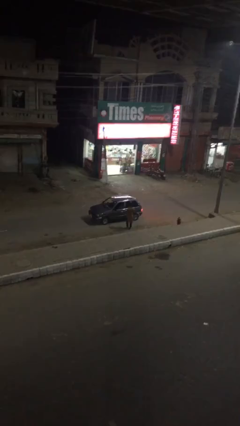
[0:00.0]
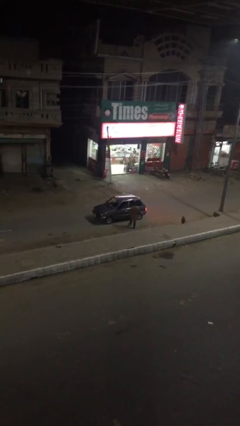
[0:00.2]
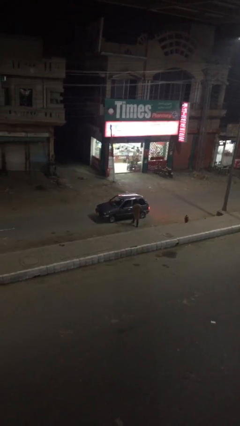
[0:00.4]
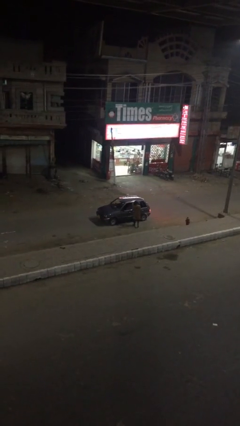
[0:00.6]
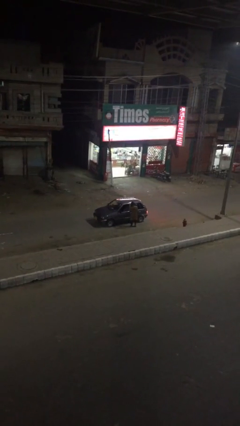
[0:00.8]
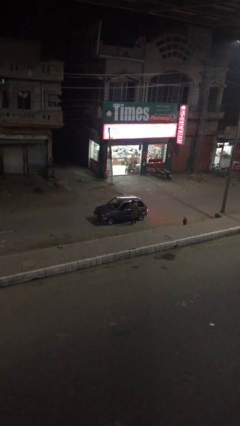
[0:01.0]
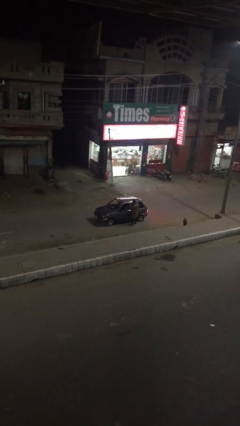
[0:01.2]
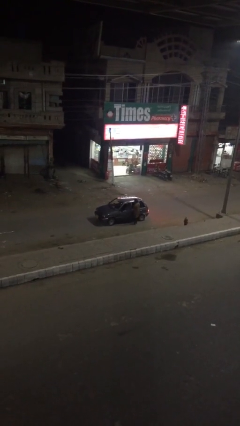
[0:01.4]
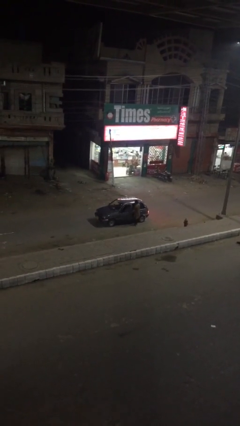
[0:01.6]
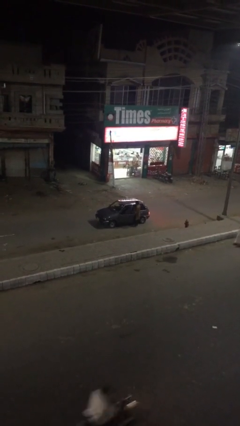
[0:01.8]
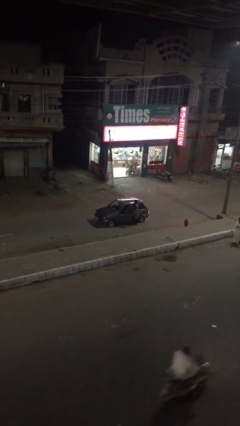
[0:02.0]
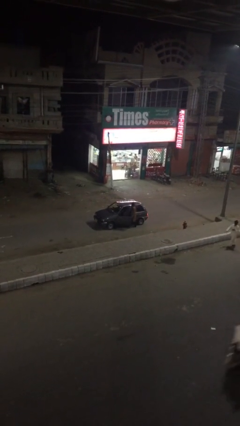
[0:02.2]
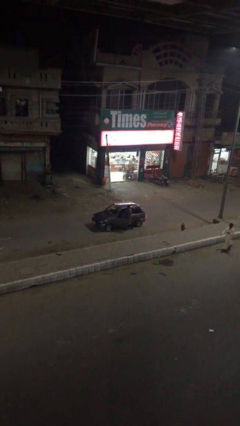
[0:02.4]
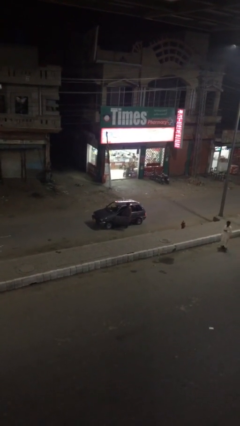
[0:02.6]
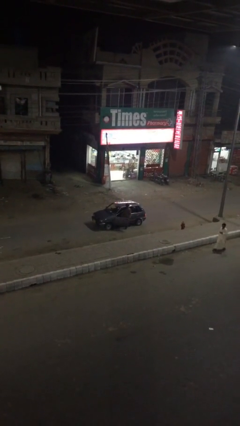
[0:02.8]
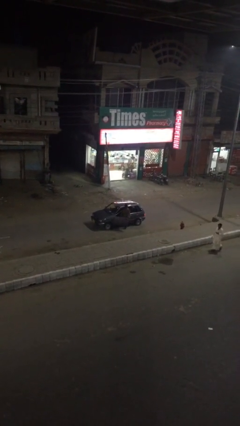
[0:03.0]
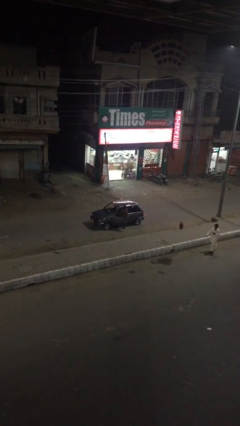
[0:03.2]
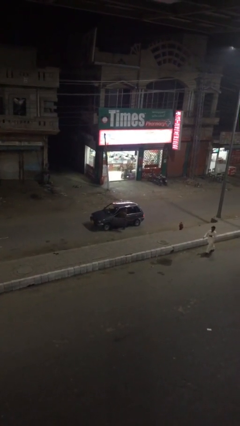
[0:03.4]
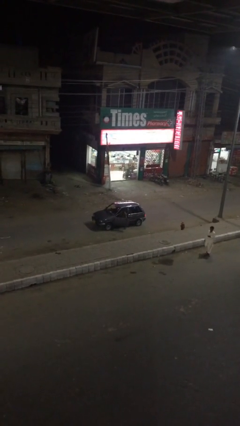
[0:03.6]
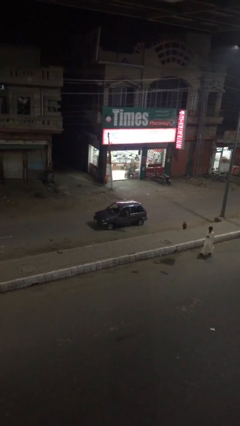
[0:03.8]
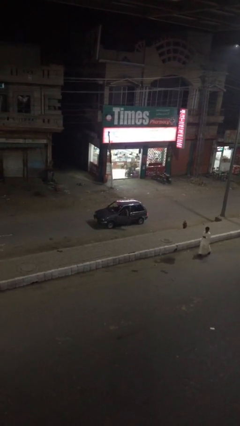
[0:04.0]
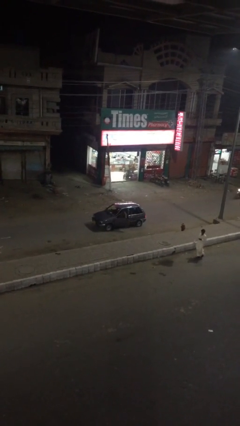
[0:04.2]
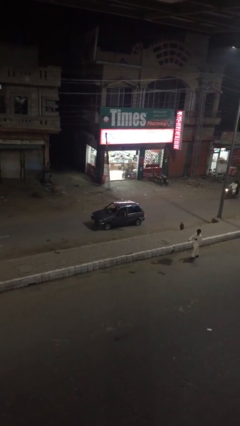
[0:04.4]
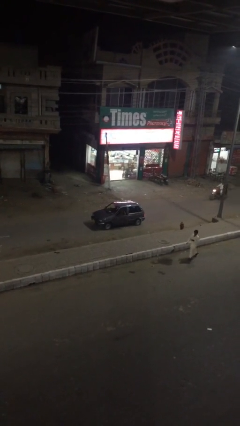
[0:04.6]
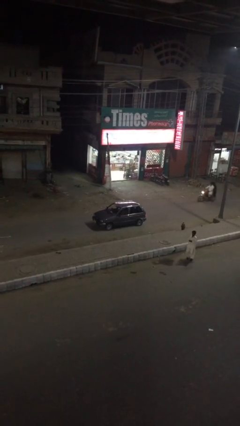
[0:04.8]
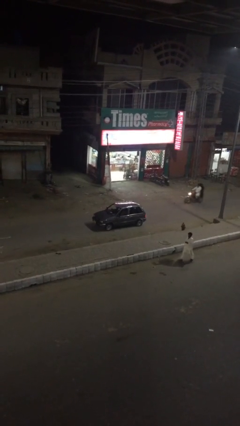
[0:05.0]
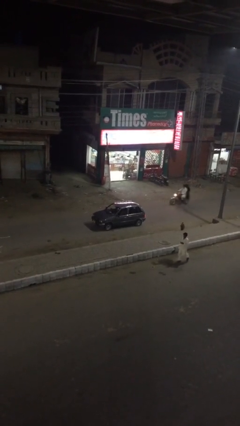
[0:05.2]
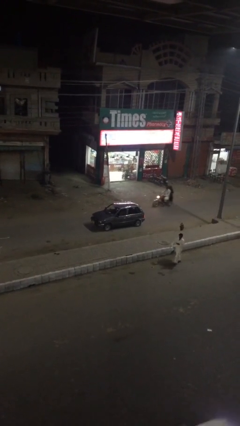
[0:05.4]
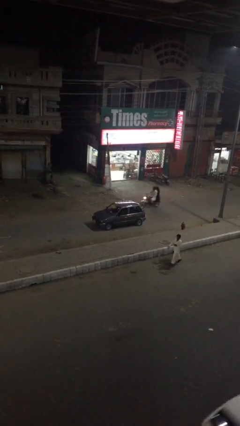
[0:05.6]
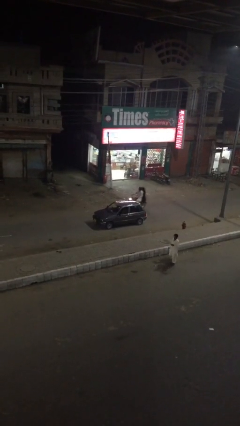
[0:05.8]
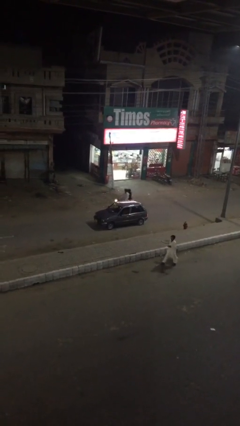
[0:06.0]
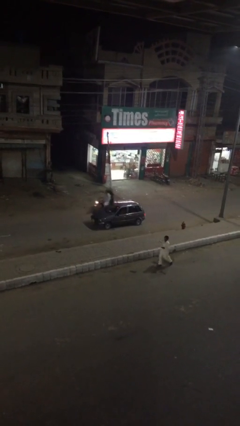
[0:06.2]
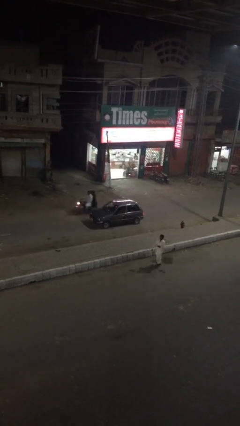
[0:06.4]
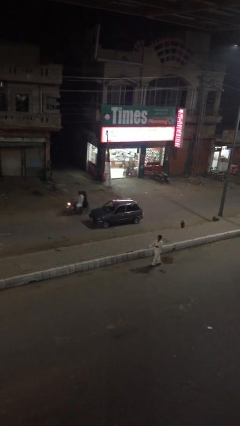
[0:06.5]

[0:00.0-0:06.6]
car picks up person

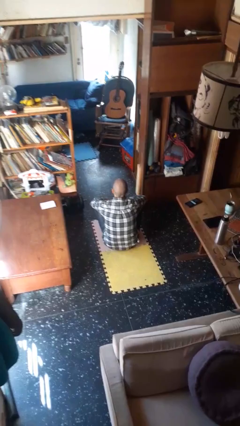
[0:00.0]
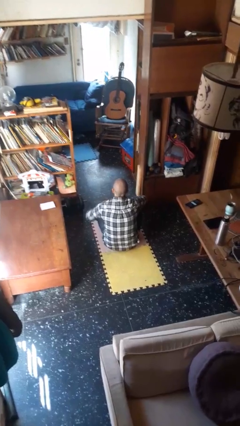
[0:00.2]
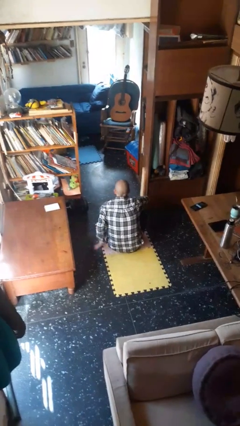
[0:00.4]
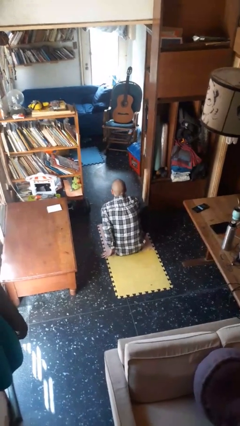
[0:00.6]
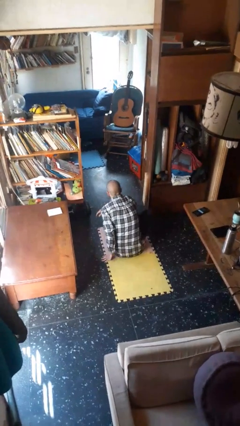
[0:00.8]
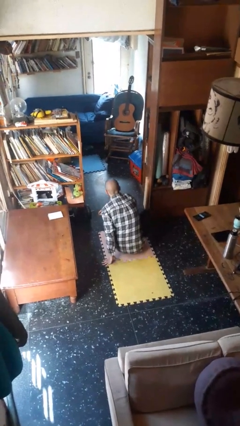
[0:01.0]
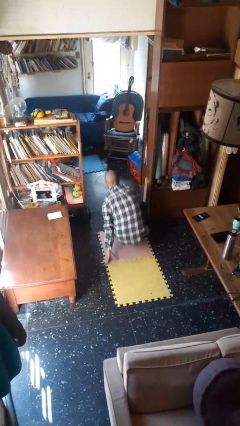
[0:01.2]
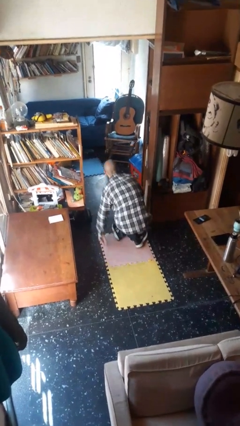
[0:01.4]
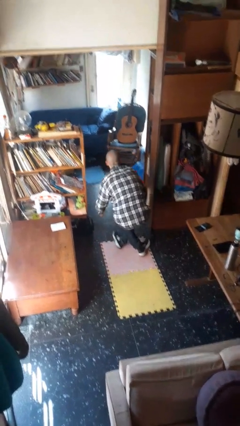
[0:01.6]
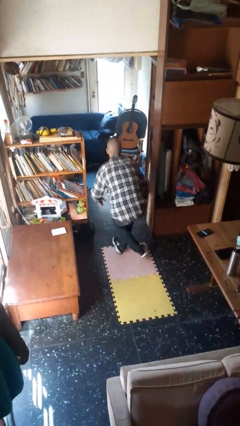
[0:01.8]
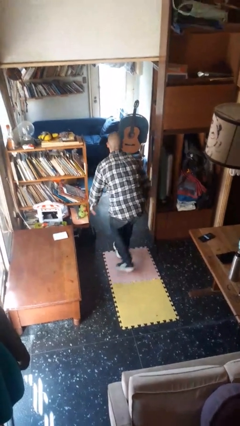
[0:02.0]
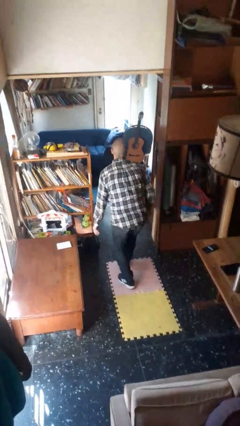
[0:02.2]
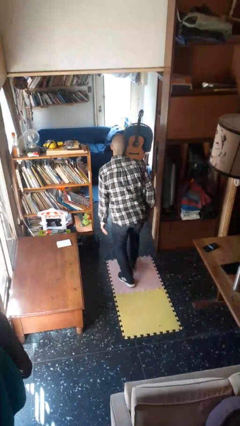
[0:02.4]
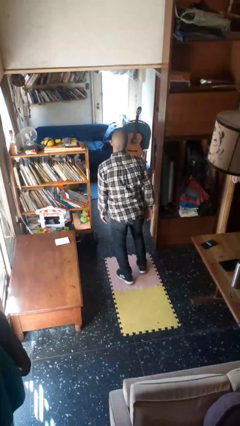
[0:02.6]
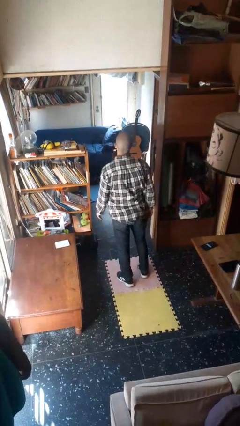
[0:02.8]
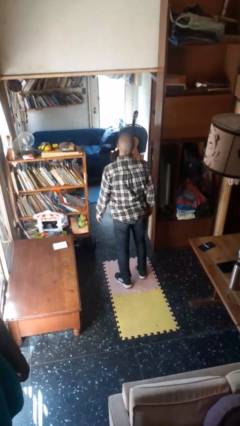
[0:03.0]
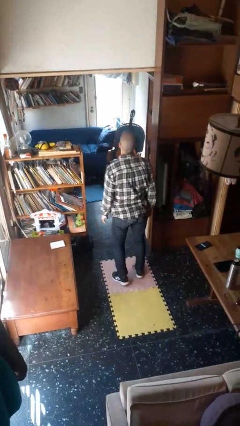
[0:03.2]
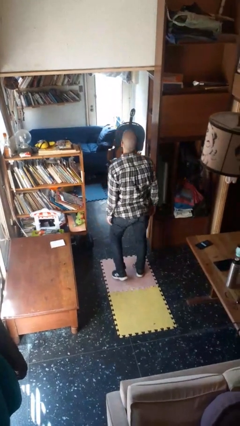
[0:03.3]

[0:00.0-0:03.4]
person stands up from floor

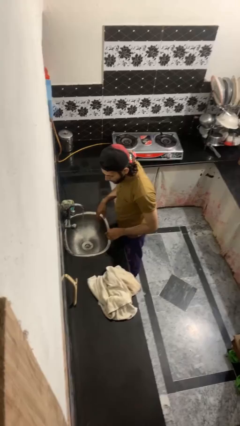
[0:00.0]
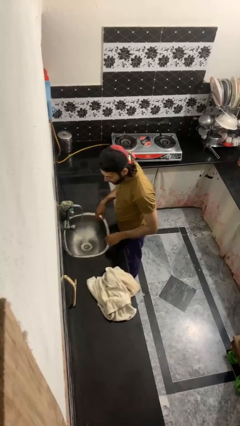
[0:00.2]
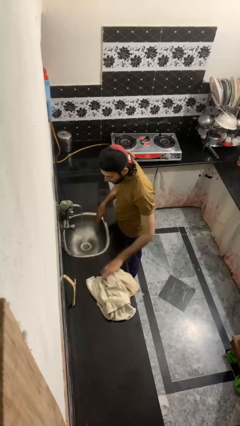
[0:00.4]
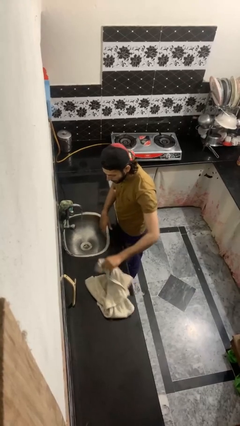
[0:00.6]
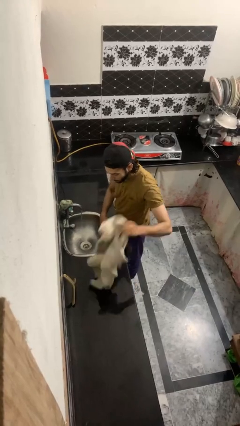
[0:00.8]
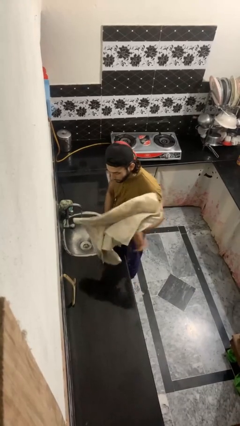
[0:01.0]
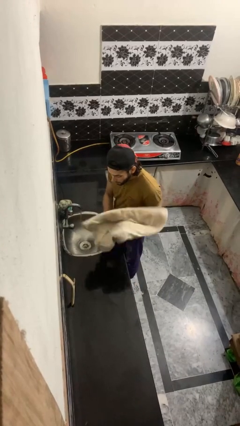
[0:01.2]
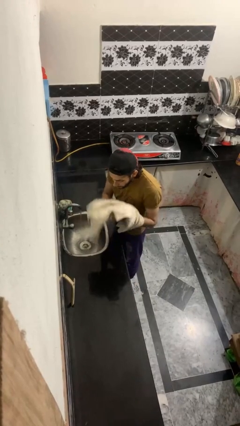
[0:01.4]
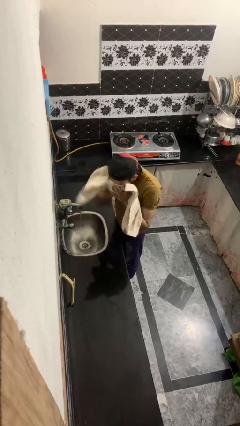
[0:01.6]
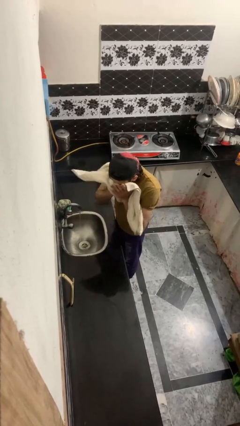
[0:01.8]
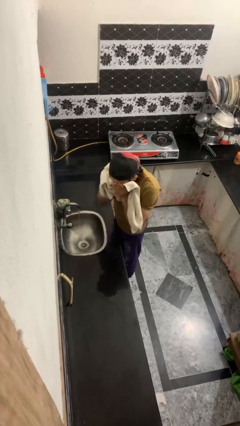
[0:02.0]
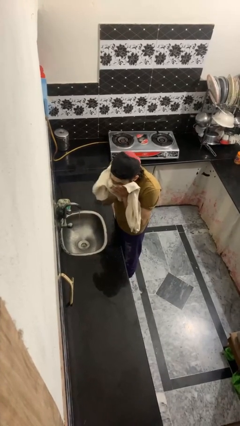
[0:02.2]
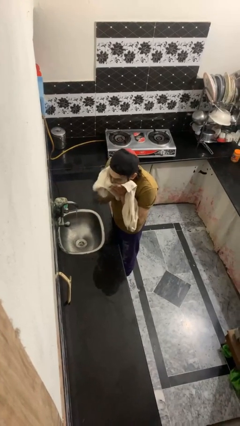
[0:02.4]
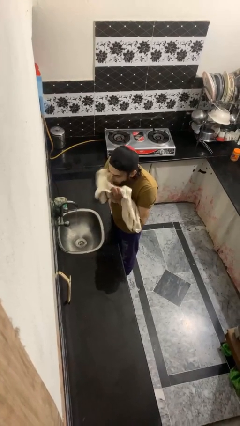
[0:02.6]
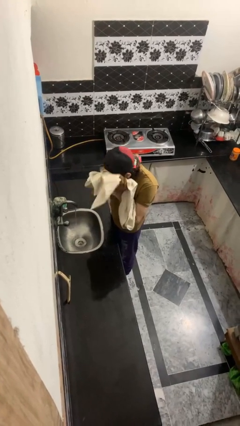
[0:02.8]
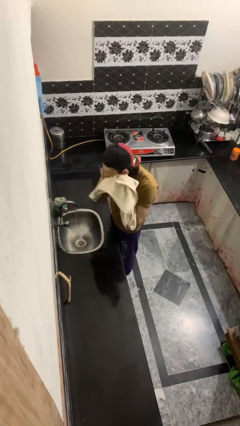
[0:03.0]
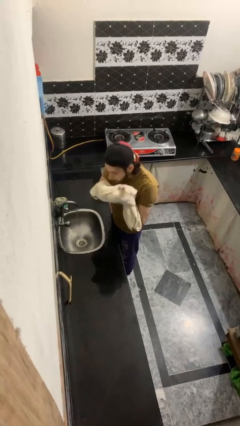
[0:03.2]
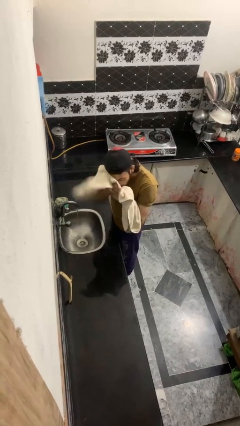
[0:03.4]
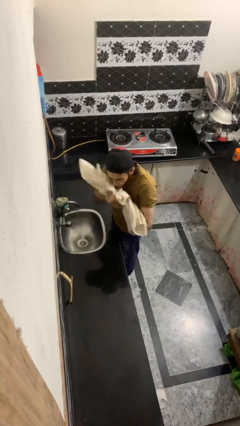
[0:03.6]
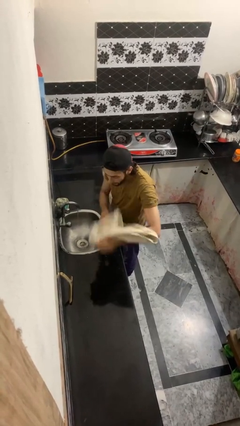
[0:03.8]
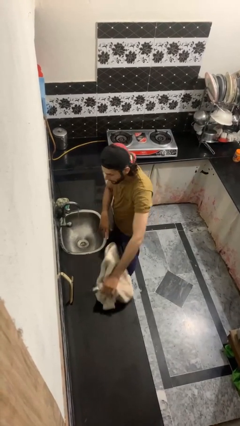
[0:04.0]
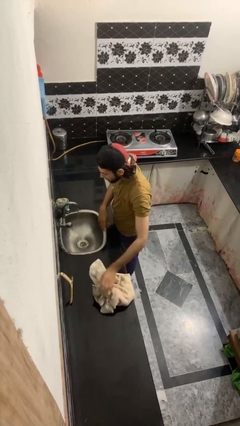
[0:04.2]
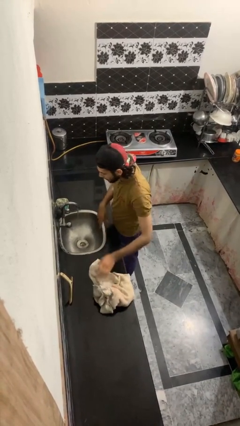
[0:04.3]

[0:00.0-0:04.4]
person dries face with towel

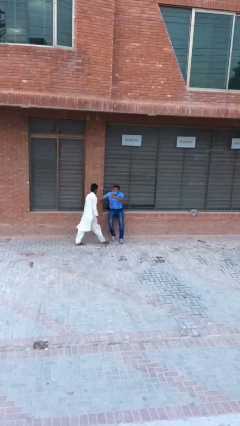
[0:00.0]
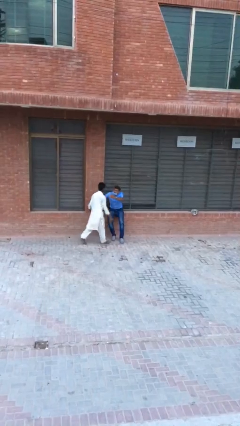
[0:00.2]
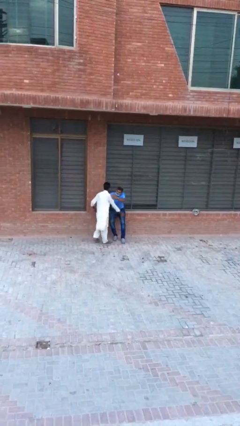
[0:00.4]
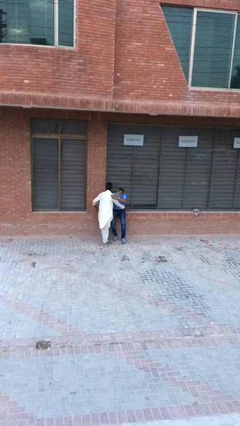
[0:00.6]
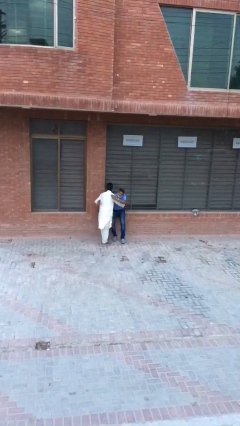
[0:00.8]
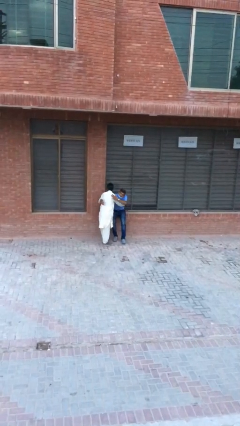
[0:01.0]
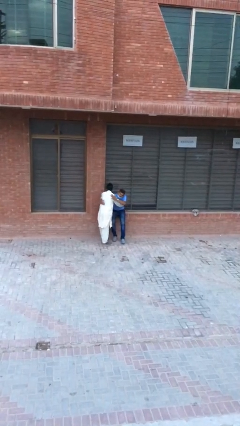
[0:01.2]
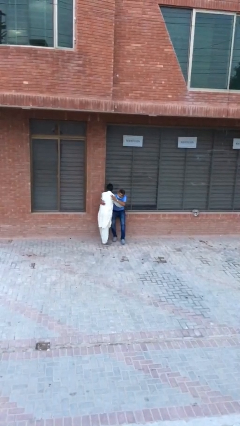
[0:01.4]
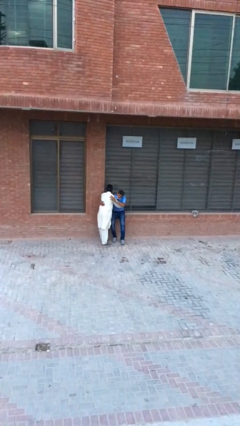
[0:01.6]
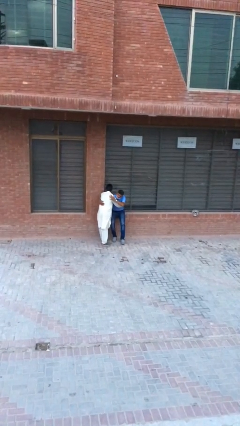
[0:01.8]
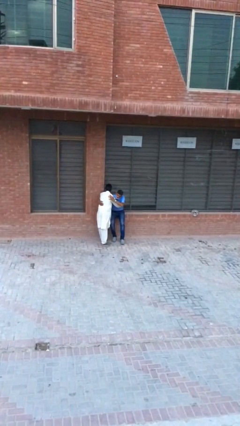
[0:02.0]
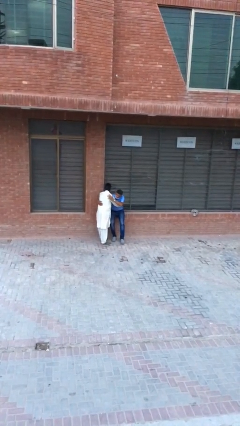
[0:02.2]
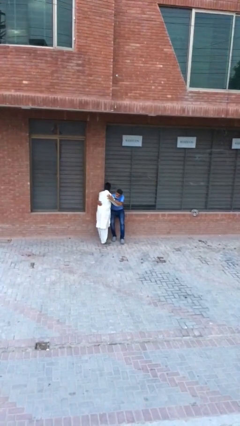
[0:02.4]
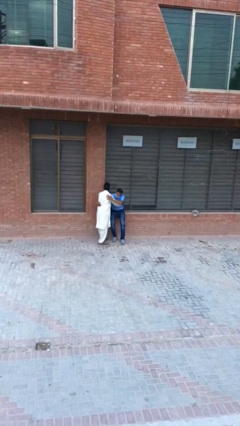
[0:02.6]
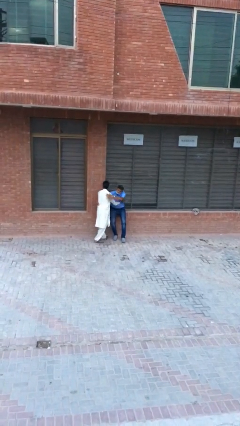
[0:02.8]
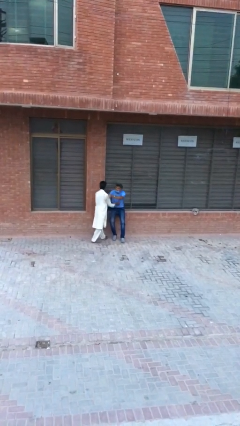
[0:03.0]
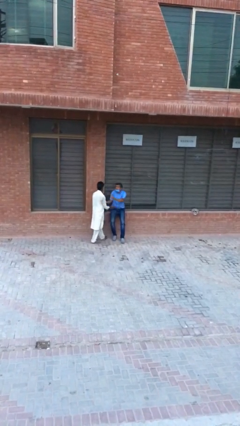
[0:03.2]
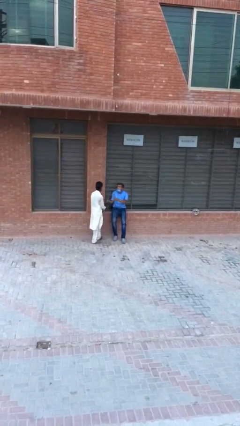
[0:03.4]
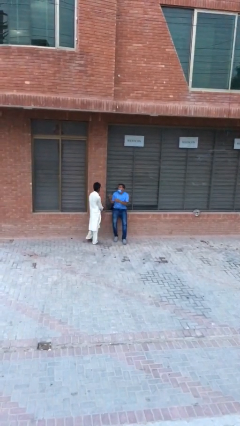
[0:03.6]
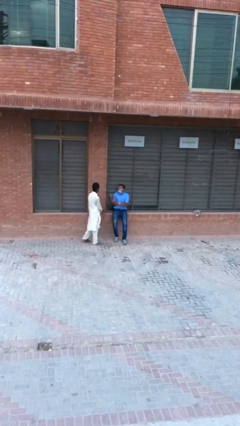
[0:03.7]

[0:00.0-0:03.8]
person embraces person
